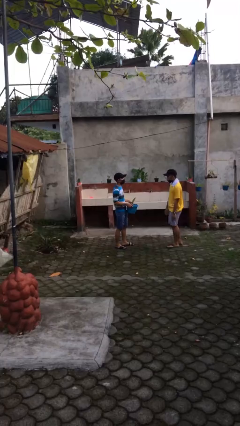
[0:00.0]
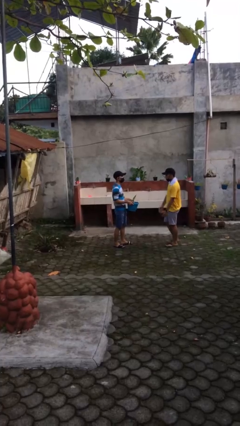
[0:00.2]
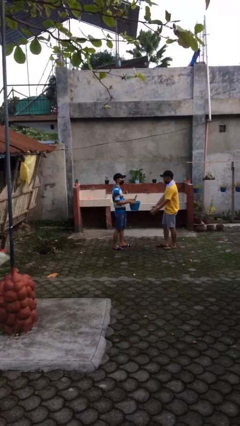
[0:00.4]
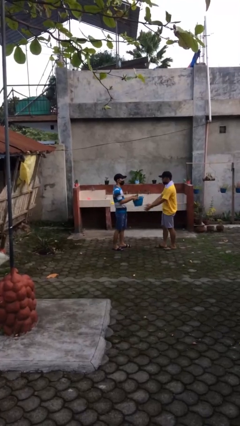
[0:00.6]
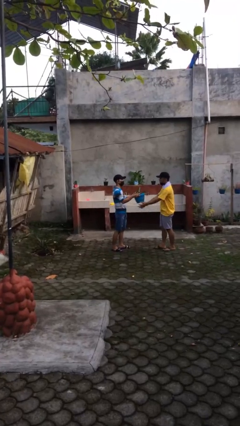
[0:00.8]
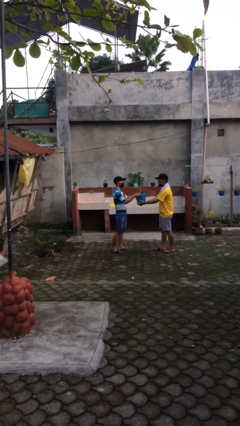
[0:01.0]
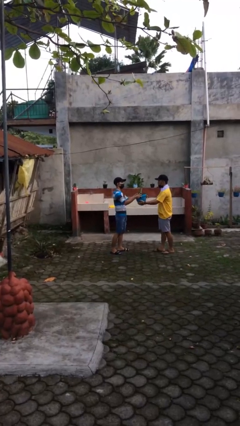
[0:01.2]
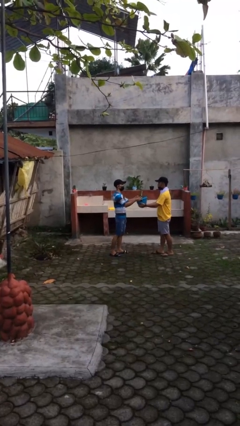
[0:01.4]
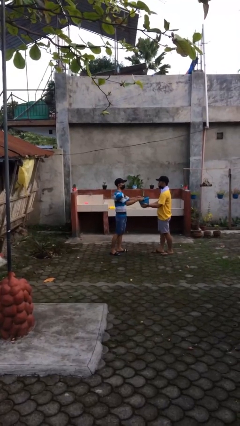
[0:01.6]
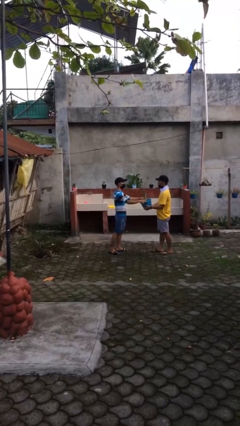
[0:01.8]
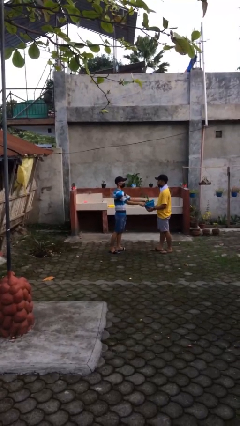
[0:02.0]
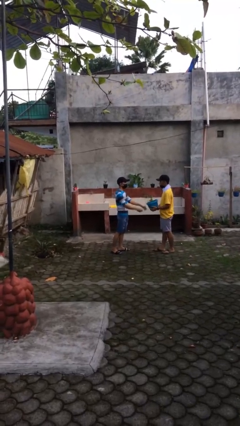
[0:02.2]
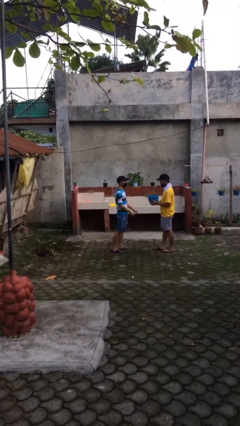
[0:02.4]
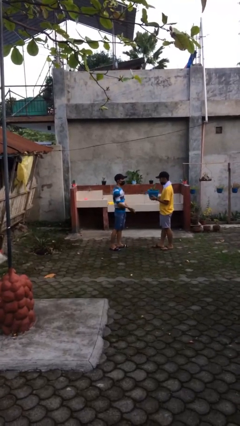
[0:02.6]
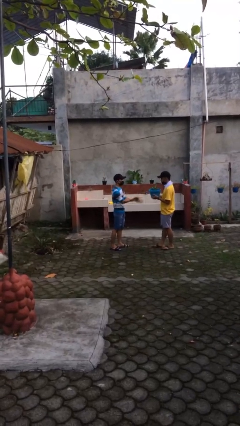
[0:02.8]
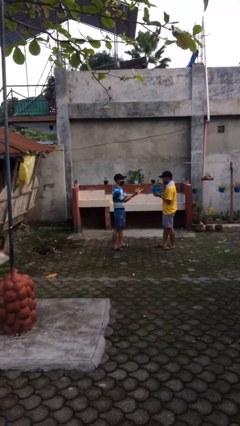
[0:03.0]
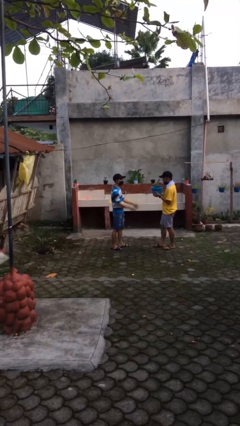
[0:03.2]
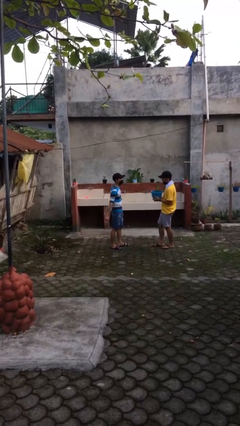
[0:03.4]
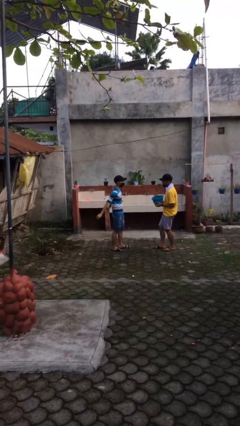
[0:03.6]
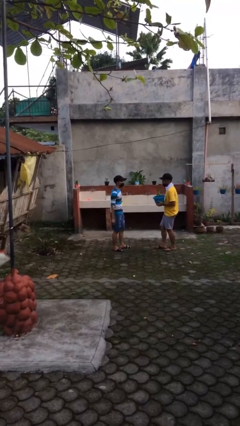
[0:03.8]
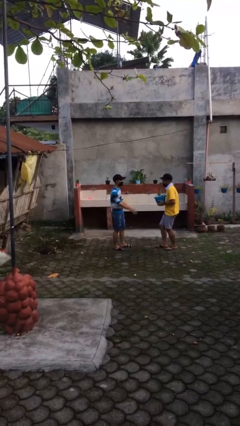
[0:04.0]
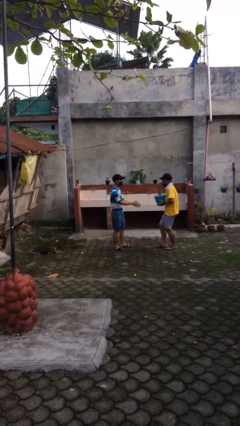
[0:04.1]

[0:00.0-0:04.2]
person transfers object to person

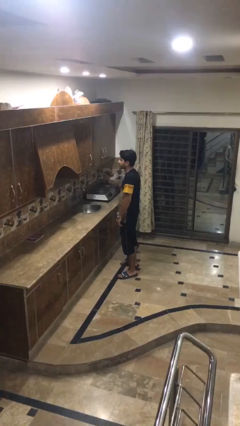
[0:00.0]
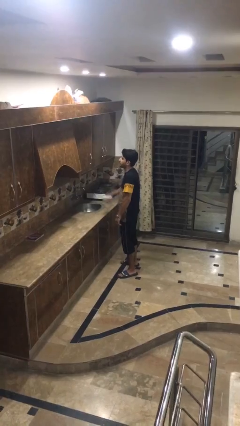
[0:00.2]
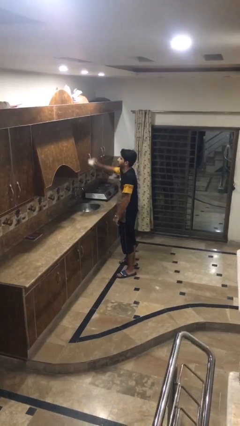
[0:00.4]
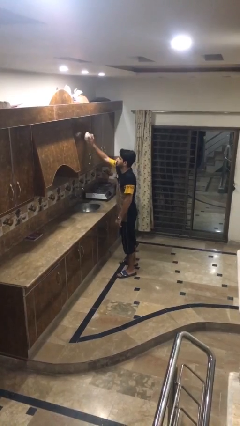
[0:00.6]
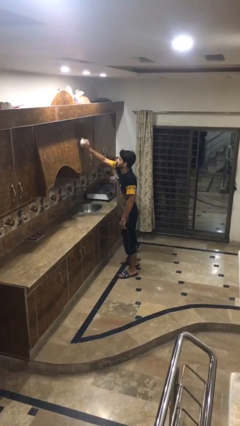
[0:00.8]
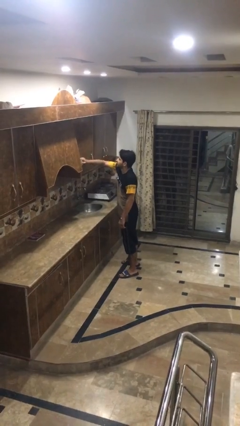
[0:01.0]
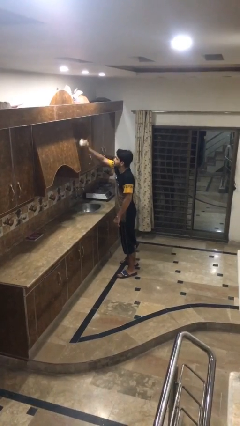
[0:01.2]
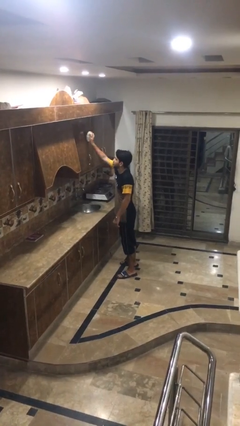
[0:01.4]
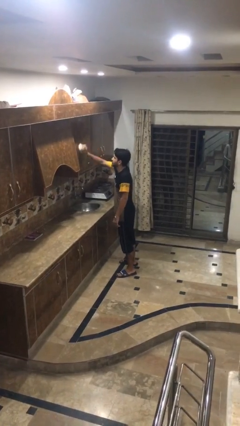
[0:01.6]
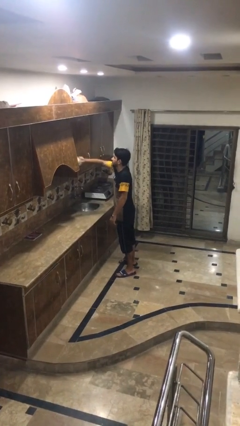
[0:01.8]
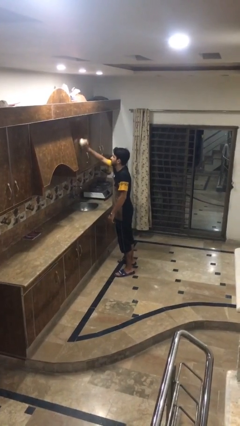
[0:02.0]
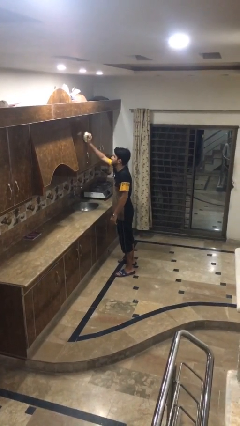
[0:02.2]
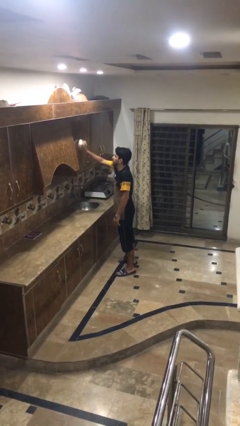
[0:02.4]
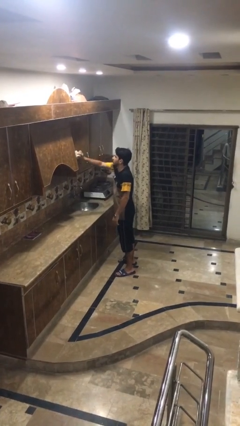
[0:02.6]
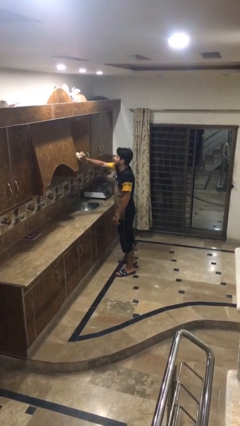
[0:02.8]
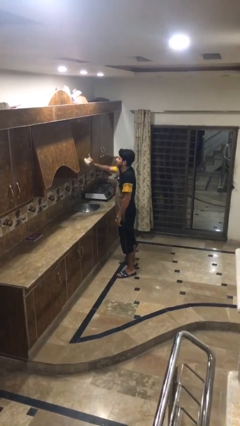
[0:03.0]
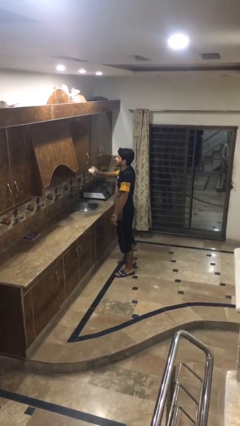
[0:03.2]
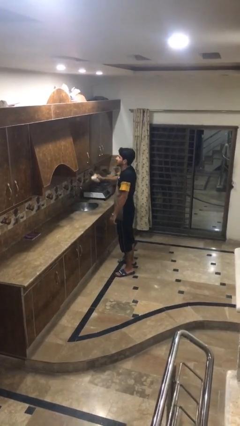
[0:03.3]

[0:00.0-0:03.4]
person dusts furniture

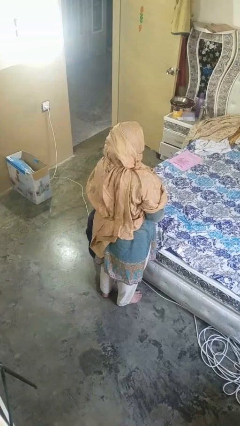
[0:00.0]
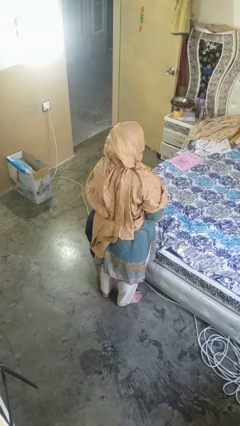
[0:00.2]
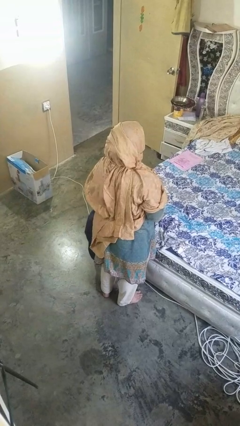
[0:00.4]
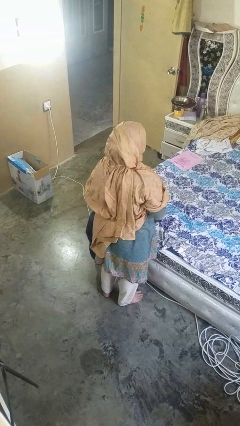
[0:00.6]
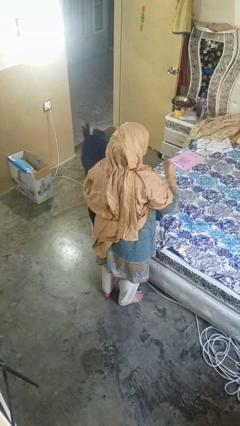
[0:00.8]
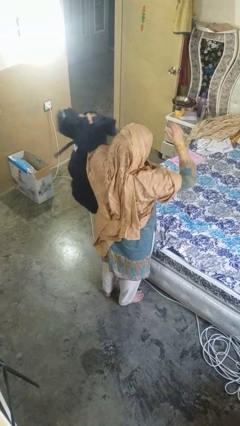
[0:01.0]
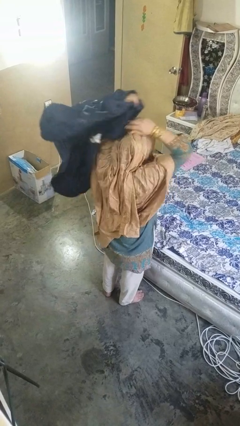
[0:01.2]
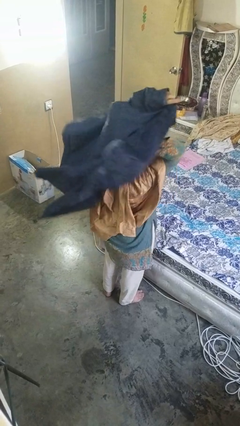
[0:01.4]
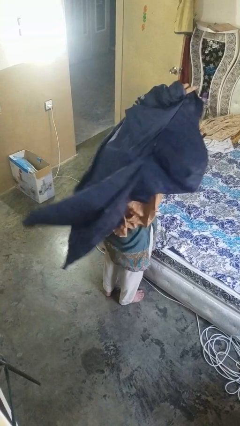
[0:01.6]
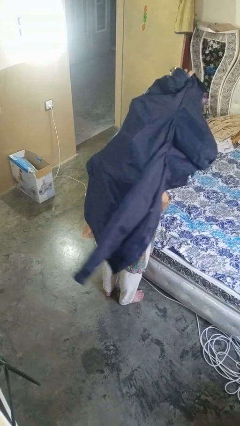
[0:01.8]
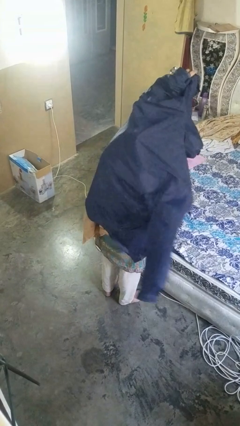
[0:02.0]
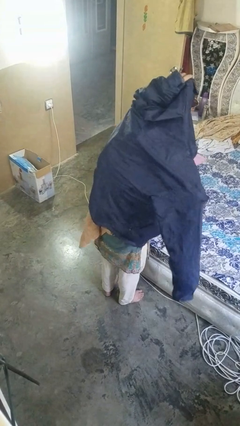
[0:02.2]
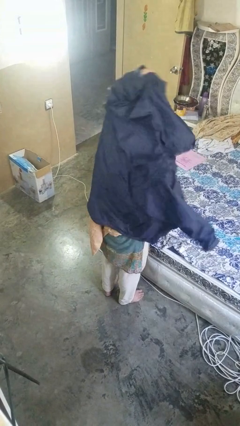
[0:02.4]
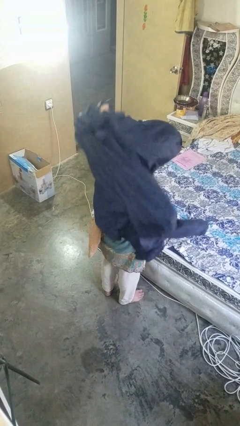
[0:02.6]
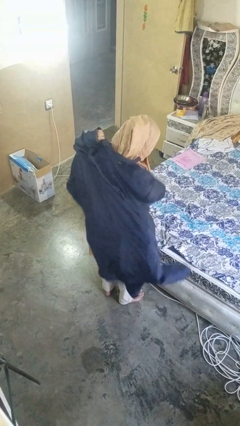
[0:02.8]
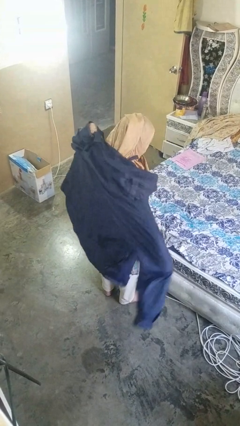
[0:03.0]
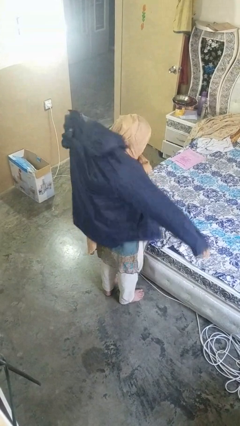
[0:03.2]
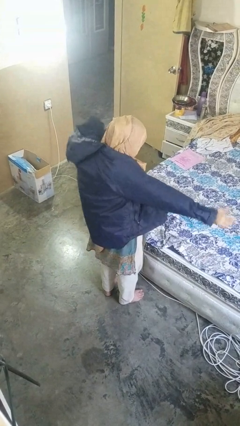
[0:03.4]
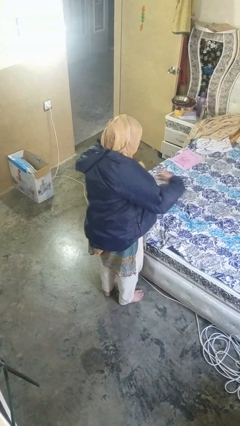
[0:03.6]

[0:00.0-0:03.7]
person puts on jacket

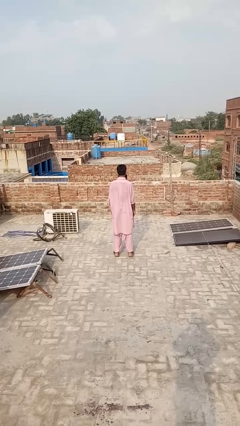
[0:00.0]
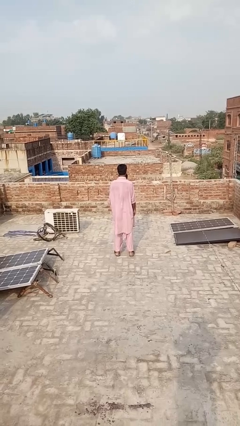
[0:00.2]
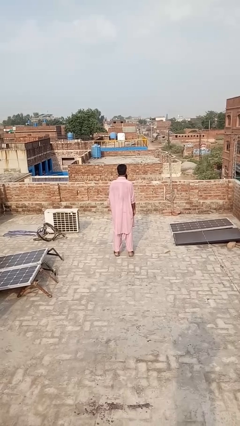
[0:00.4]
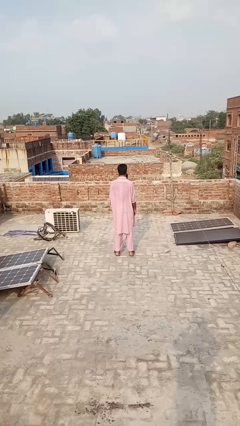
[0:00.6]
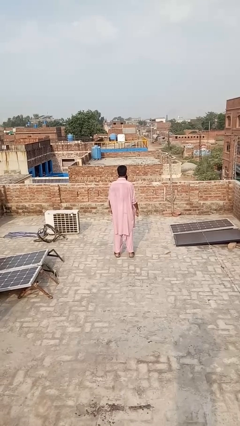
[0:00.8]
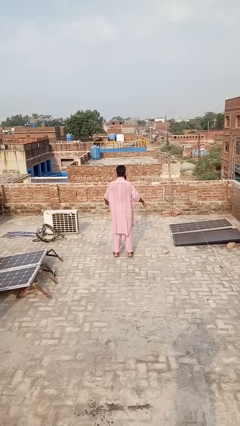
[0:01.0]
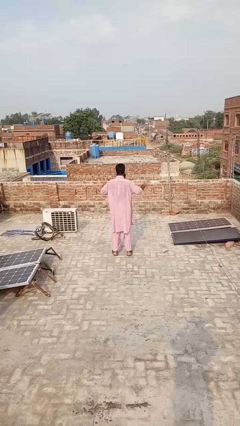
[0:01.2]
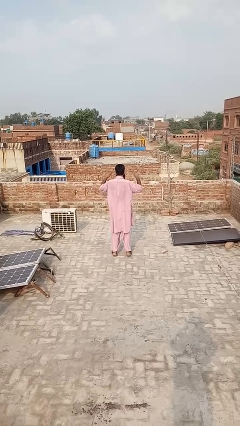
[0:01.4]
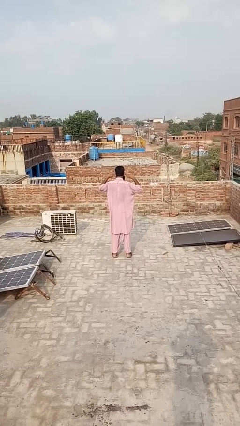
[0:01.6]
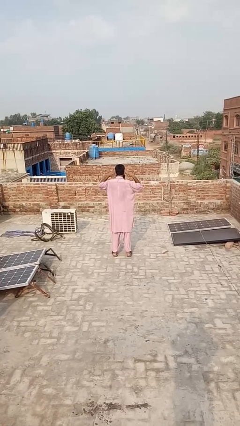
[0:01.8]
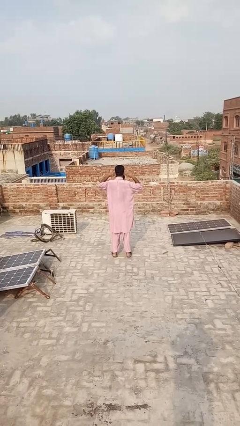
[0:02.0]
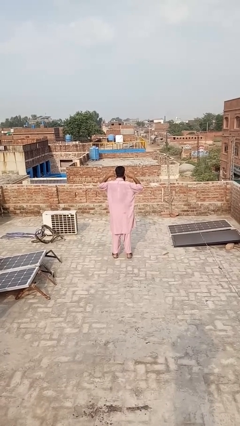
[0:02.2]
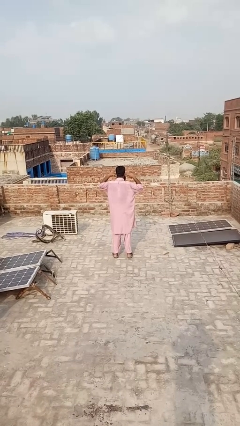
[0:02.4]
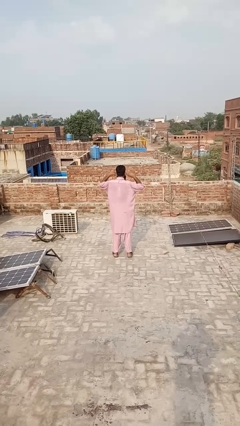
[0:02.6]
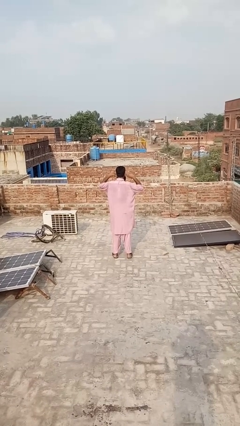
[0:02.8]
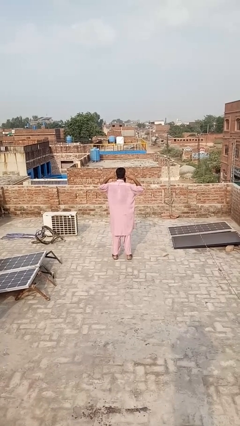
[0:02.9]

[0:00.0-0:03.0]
person puts fingers in ear

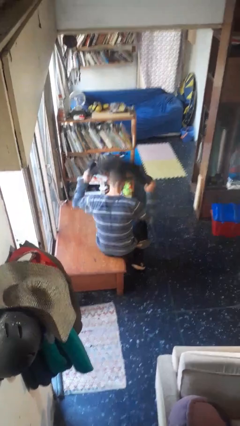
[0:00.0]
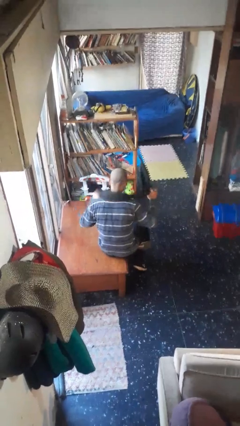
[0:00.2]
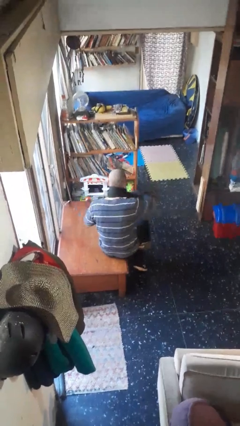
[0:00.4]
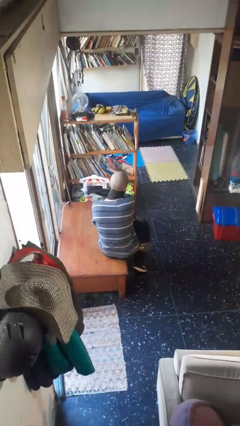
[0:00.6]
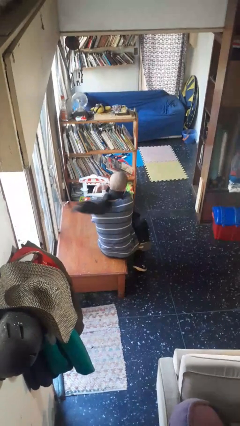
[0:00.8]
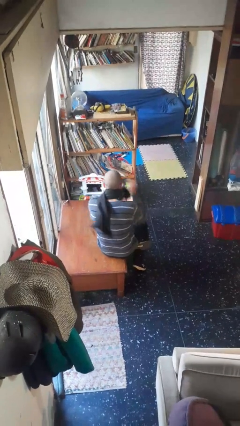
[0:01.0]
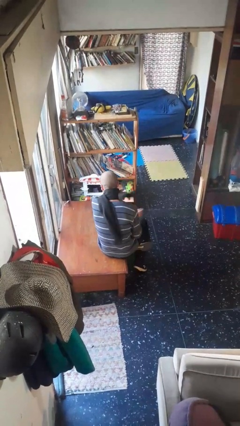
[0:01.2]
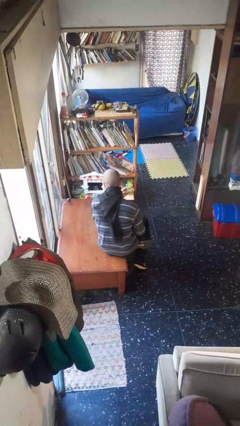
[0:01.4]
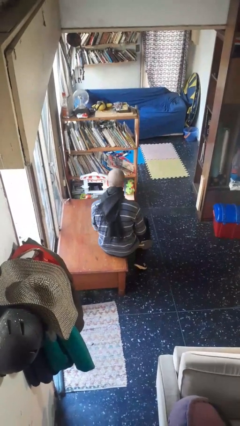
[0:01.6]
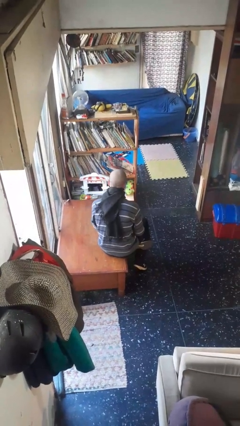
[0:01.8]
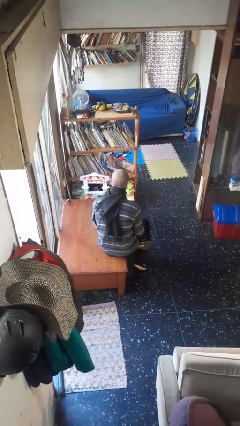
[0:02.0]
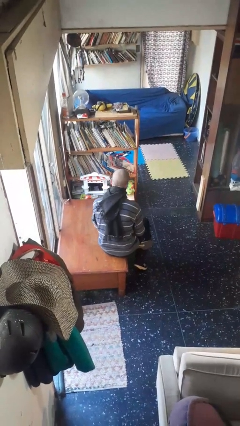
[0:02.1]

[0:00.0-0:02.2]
person puts on scarf

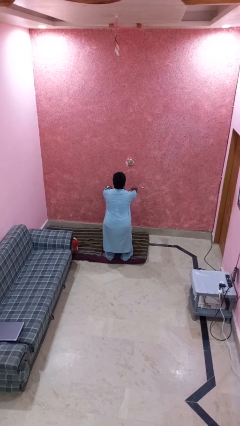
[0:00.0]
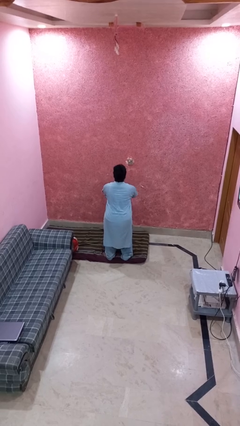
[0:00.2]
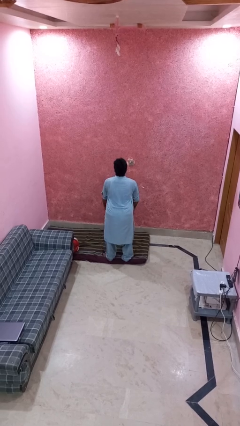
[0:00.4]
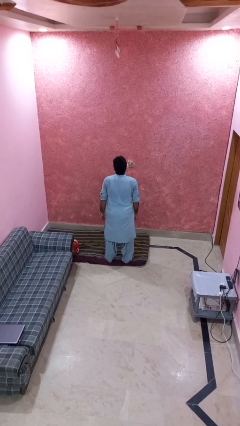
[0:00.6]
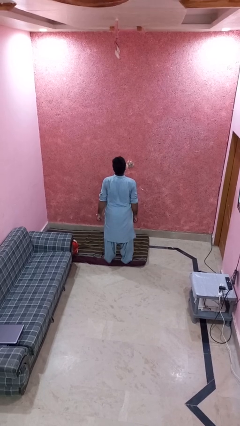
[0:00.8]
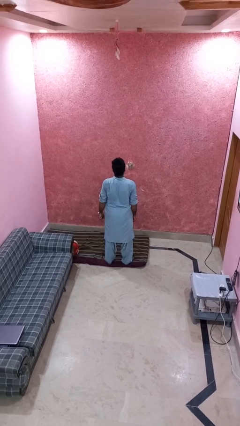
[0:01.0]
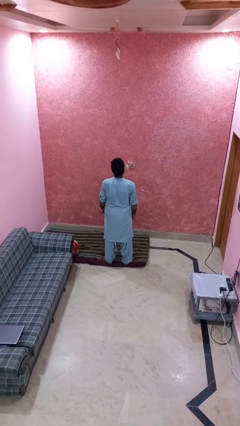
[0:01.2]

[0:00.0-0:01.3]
person stands up

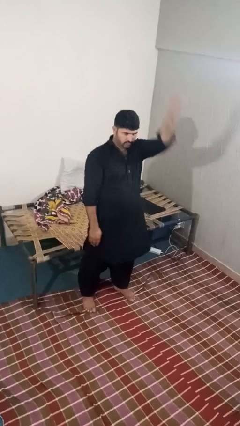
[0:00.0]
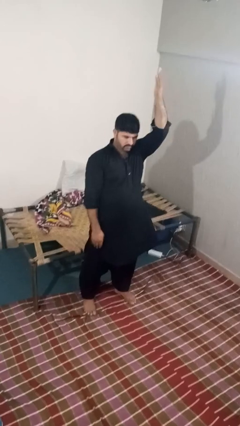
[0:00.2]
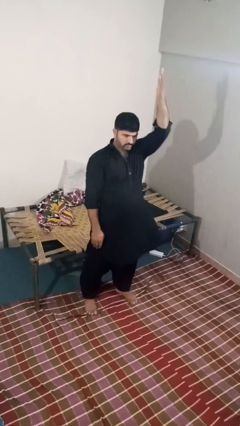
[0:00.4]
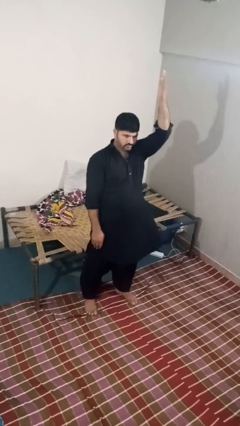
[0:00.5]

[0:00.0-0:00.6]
person gestures swipe up
